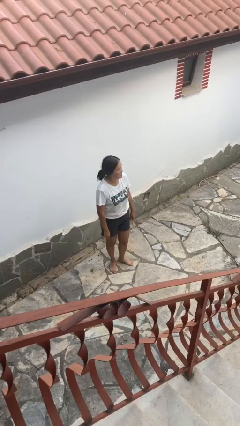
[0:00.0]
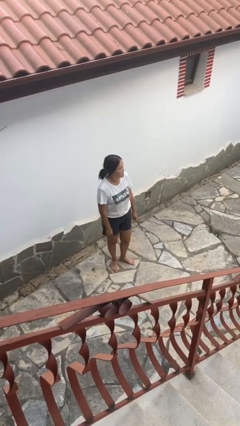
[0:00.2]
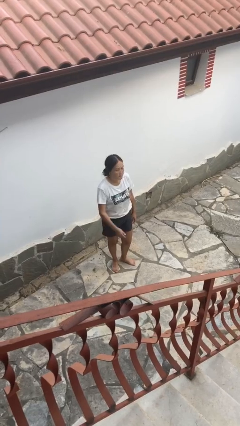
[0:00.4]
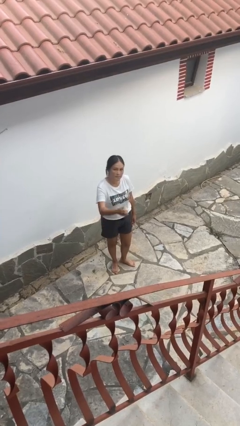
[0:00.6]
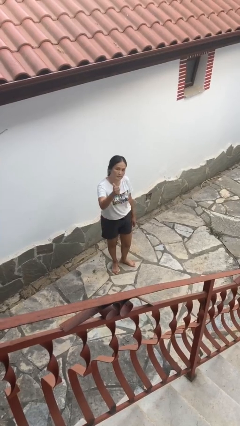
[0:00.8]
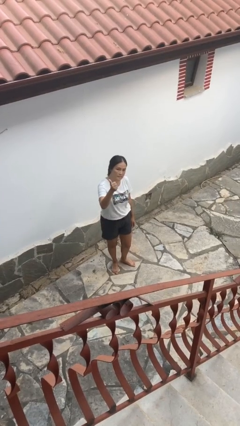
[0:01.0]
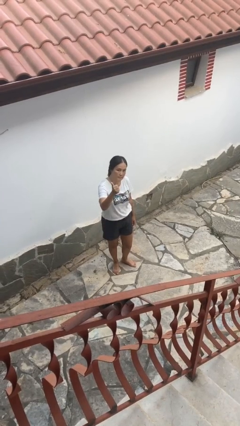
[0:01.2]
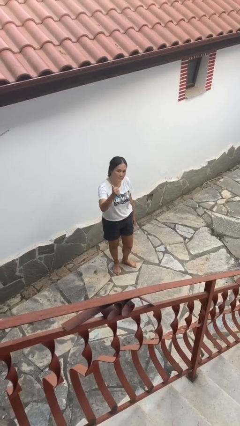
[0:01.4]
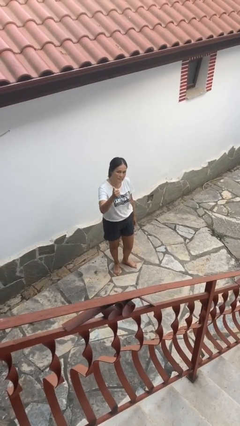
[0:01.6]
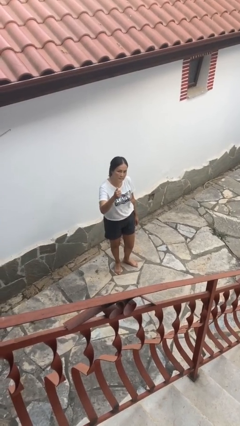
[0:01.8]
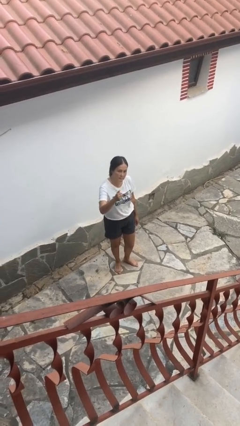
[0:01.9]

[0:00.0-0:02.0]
person gestures thumbs up

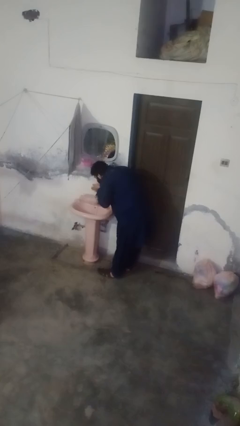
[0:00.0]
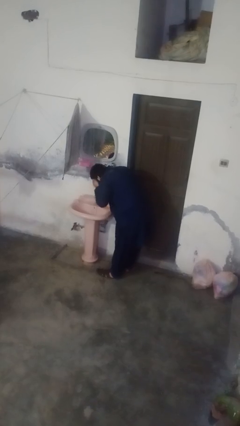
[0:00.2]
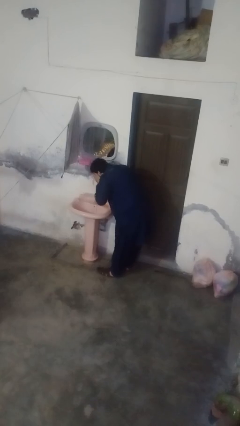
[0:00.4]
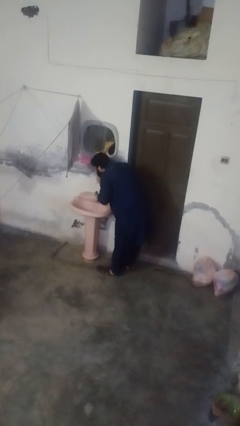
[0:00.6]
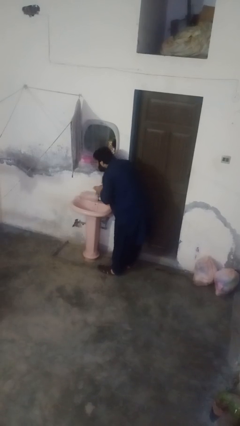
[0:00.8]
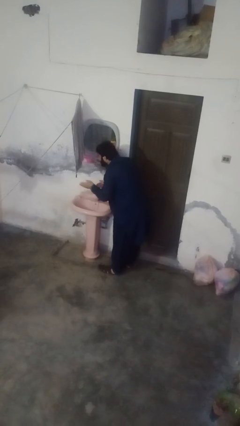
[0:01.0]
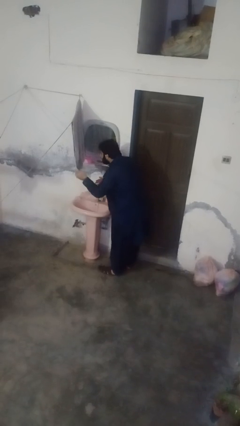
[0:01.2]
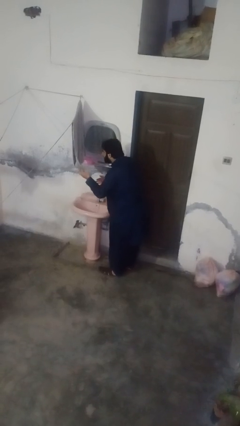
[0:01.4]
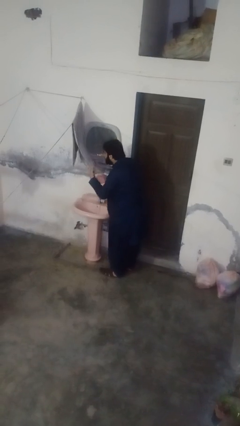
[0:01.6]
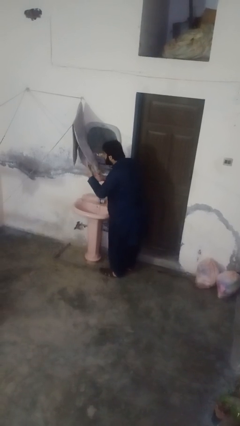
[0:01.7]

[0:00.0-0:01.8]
person washes face

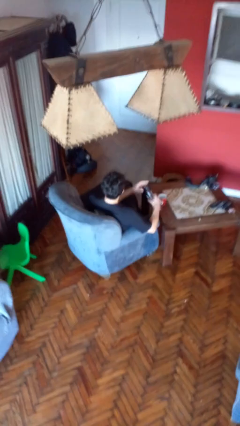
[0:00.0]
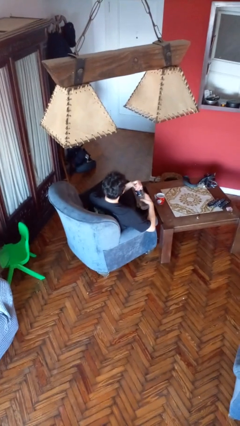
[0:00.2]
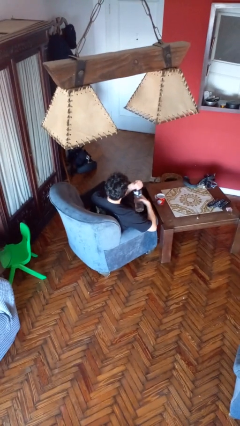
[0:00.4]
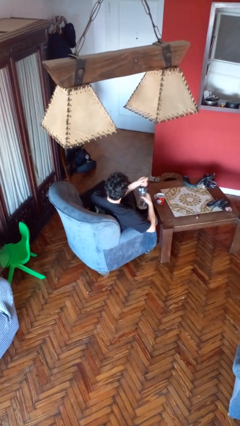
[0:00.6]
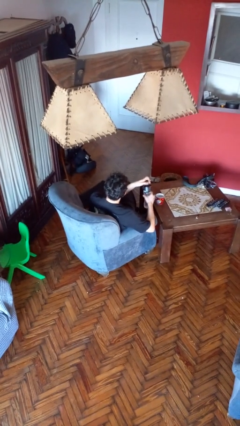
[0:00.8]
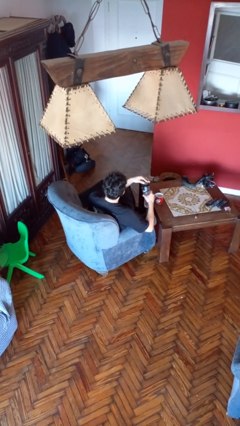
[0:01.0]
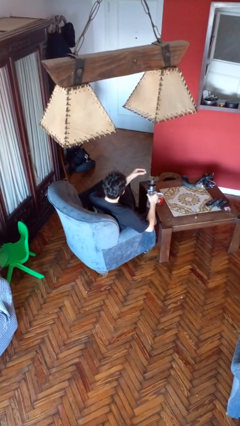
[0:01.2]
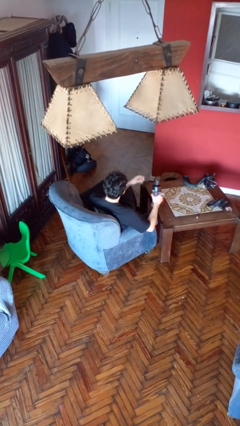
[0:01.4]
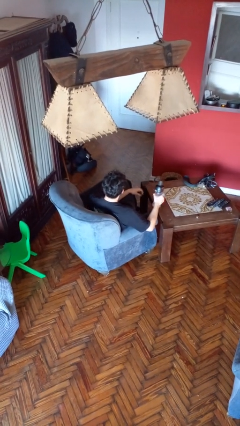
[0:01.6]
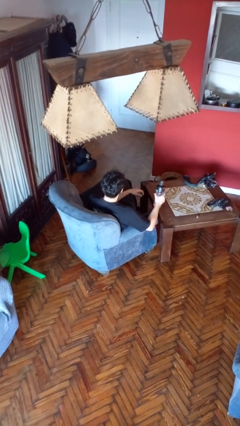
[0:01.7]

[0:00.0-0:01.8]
person unscrews lid from bottle

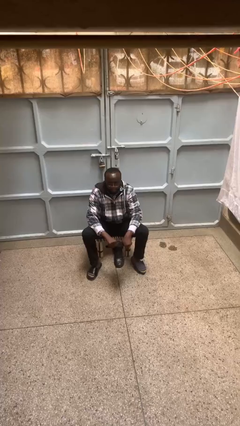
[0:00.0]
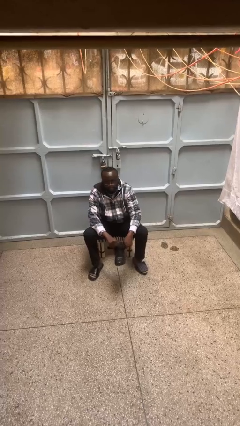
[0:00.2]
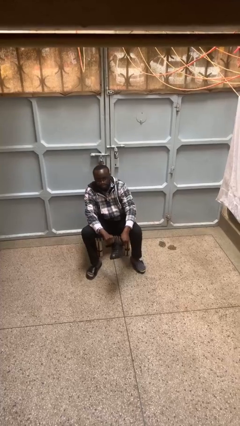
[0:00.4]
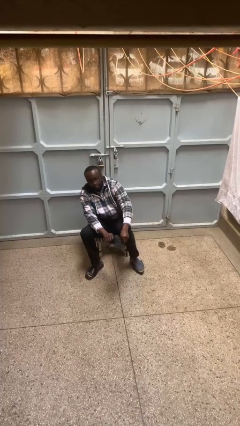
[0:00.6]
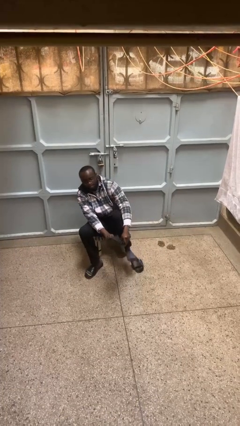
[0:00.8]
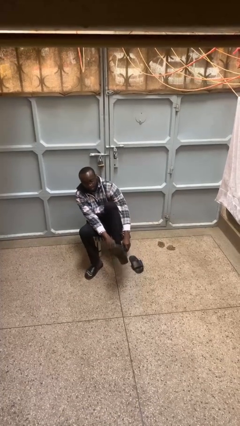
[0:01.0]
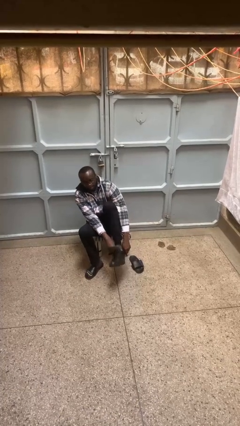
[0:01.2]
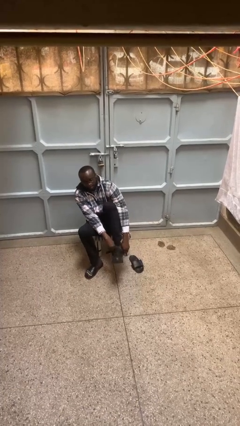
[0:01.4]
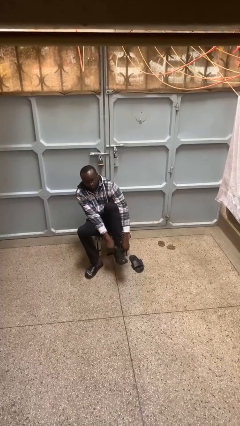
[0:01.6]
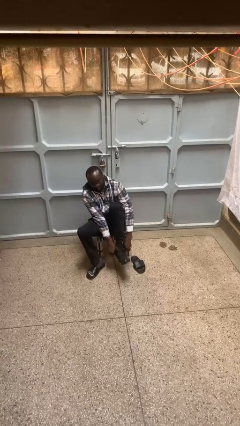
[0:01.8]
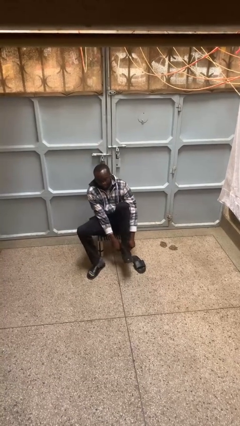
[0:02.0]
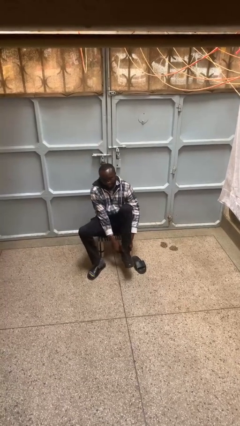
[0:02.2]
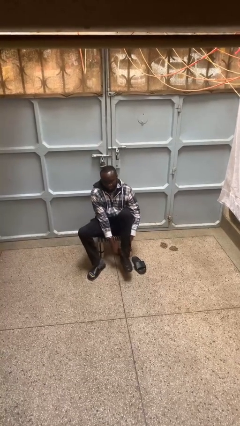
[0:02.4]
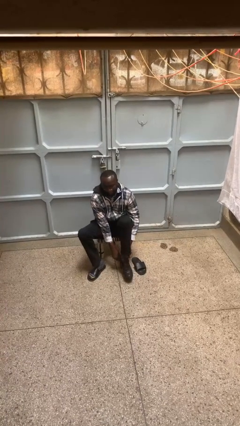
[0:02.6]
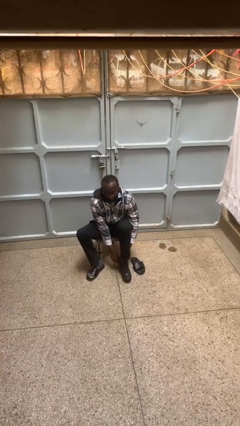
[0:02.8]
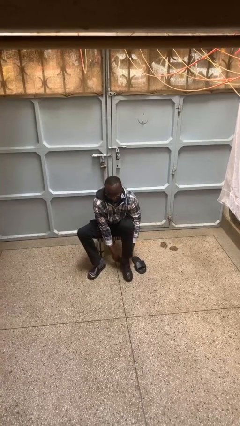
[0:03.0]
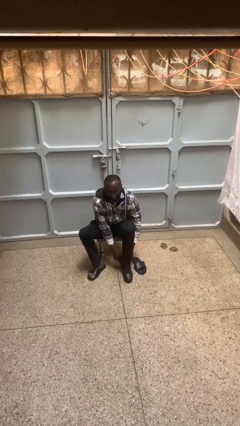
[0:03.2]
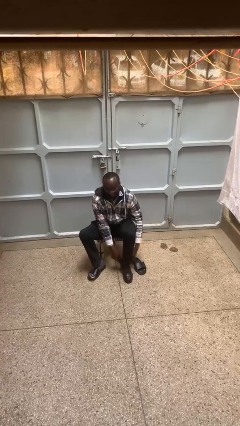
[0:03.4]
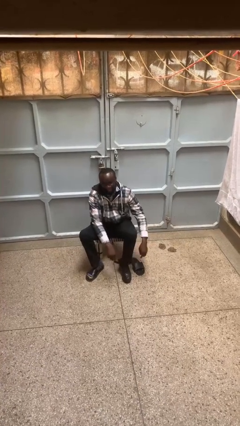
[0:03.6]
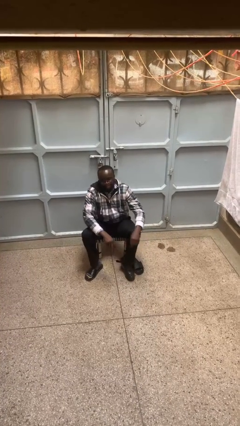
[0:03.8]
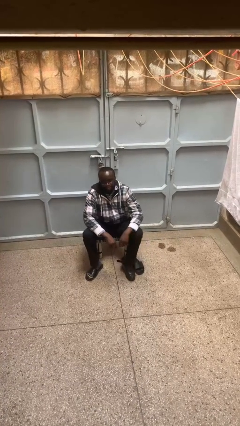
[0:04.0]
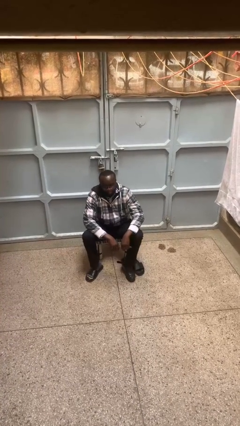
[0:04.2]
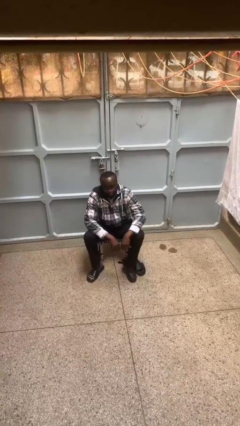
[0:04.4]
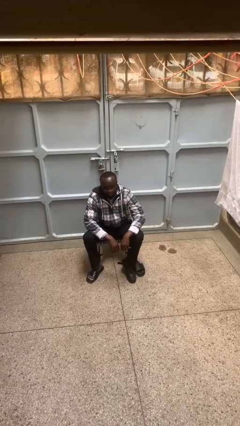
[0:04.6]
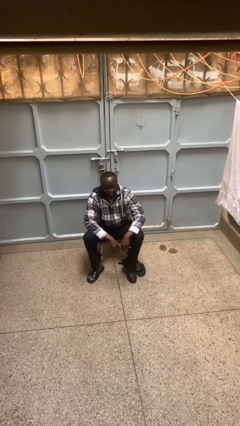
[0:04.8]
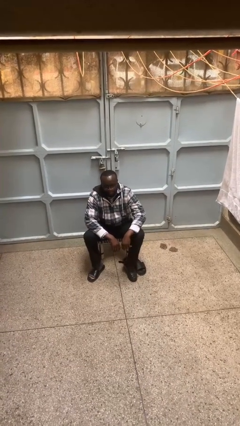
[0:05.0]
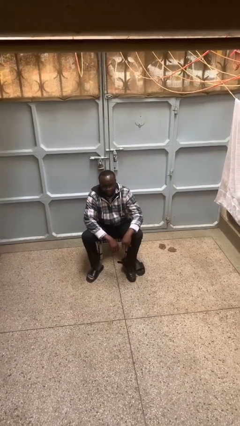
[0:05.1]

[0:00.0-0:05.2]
person puts on boots

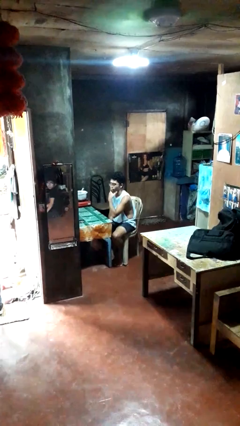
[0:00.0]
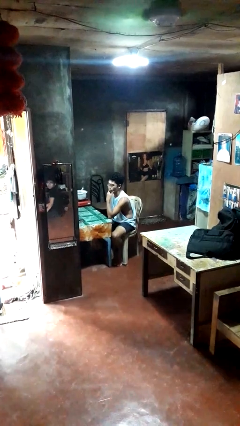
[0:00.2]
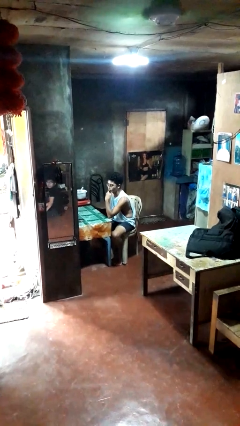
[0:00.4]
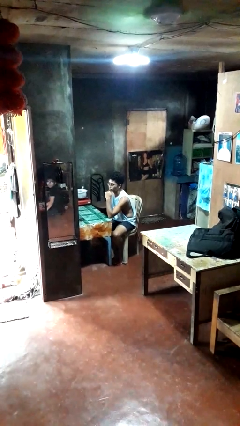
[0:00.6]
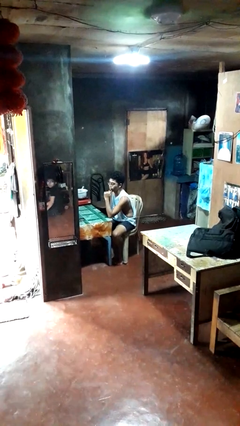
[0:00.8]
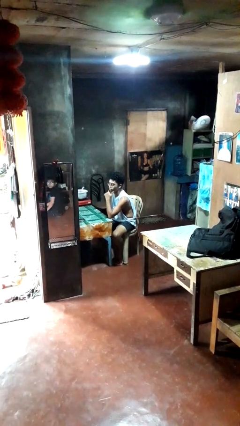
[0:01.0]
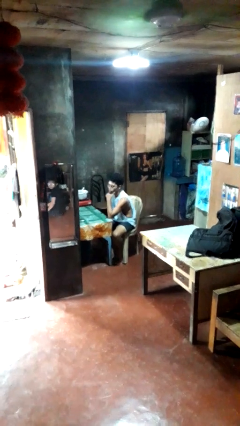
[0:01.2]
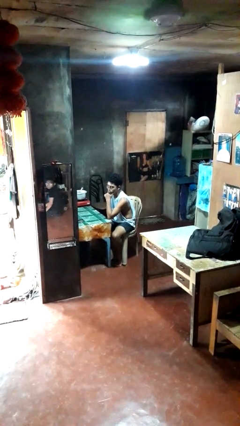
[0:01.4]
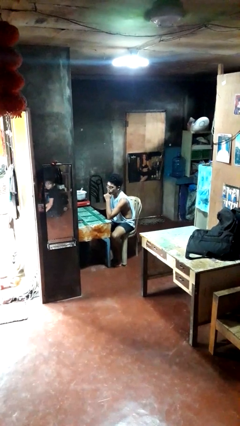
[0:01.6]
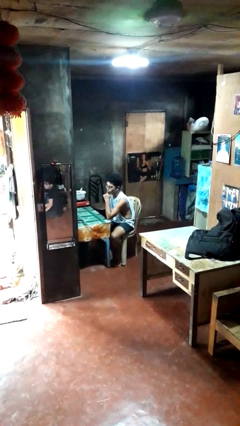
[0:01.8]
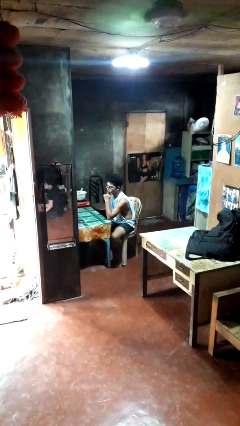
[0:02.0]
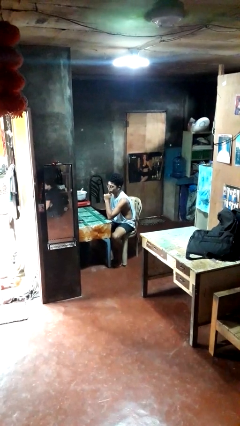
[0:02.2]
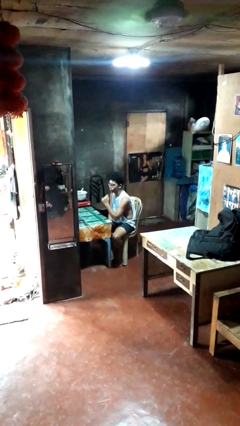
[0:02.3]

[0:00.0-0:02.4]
person strokes chin

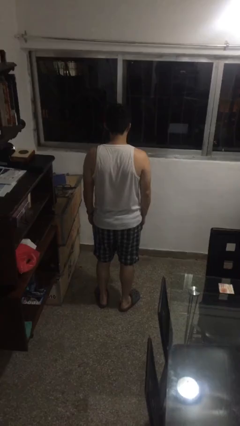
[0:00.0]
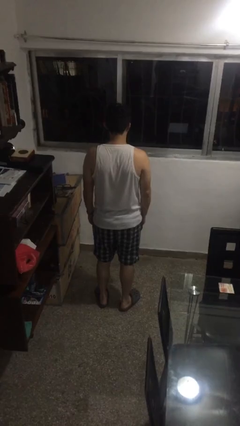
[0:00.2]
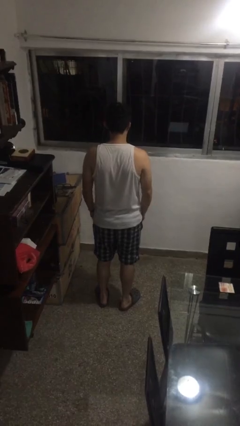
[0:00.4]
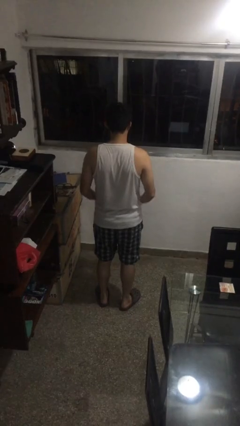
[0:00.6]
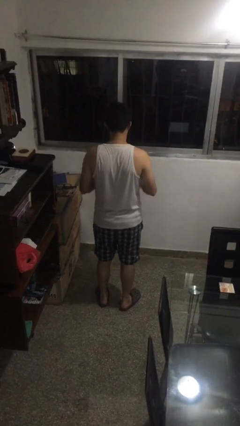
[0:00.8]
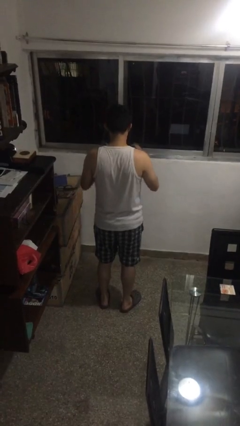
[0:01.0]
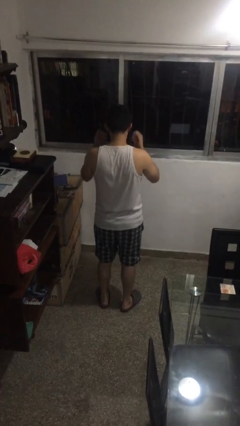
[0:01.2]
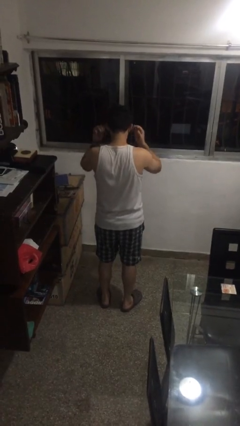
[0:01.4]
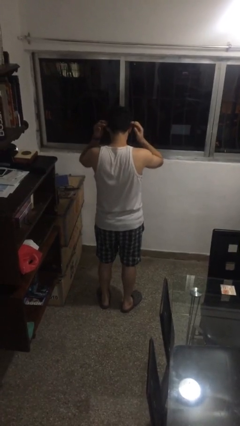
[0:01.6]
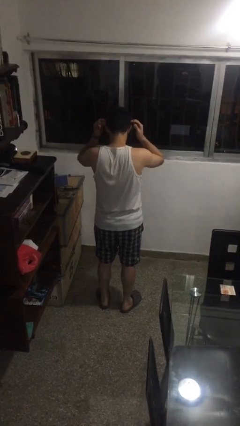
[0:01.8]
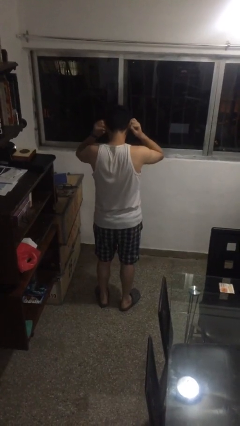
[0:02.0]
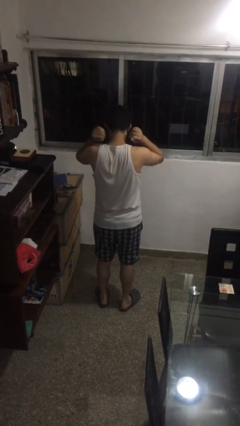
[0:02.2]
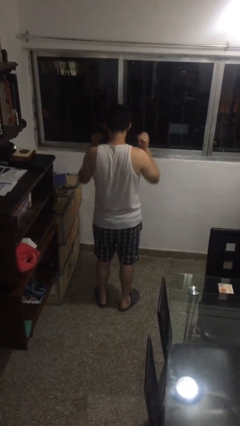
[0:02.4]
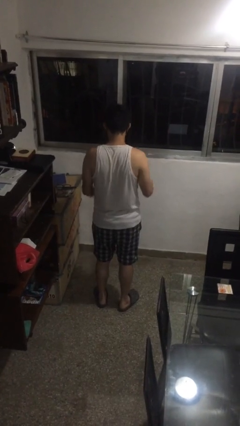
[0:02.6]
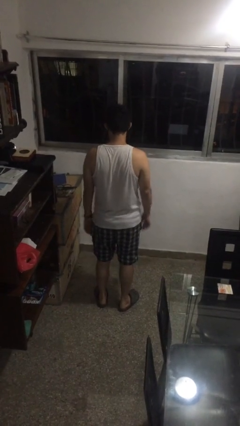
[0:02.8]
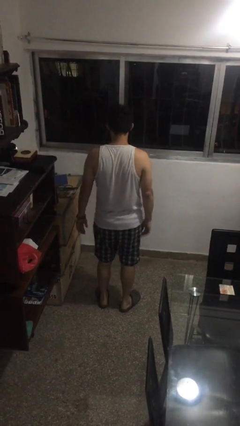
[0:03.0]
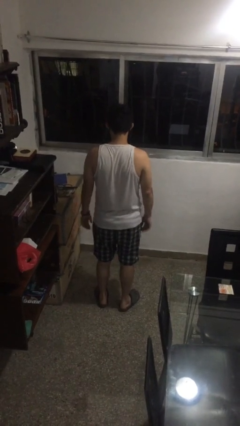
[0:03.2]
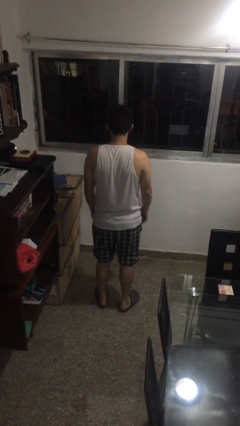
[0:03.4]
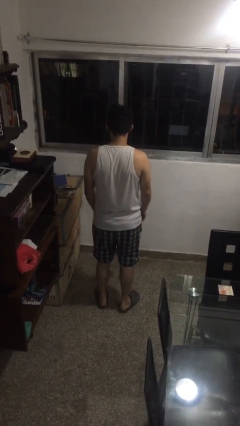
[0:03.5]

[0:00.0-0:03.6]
person puts on facemask

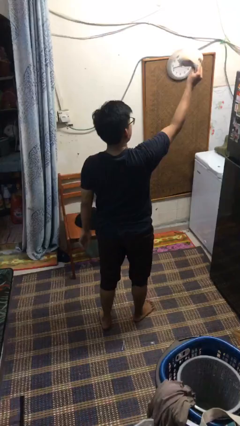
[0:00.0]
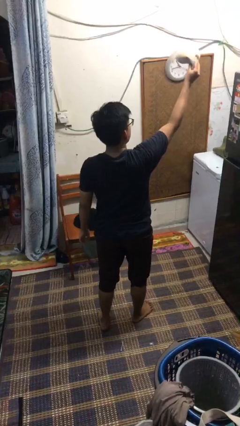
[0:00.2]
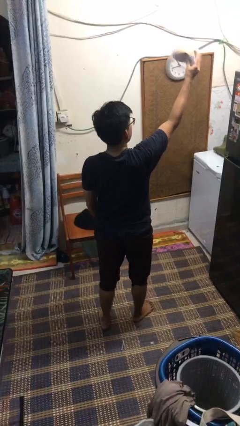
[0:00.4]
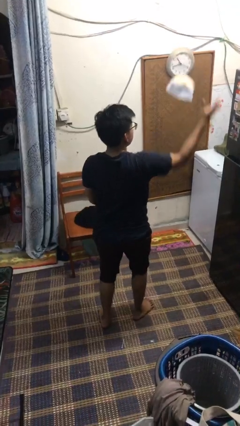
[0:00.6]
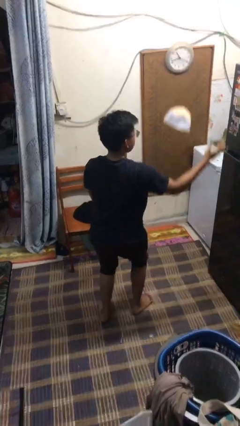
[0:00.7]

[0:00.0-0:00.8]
person drops object
